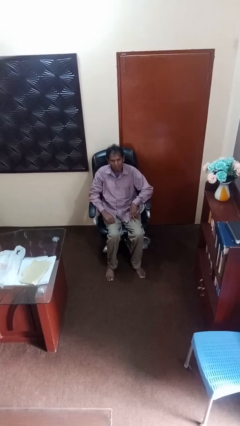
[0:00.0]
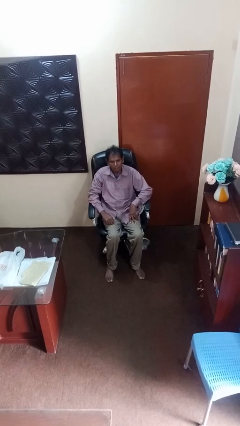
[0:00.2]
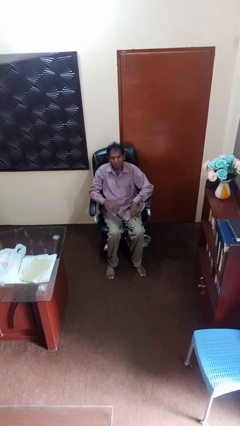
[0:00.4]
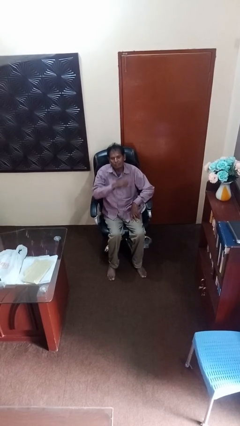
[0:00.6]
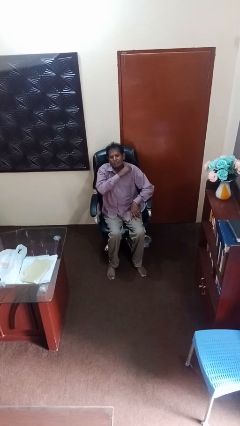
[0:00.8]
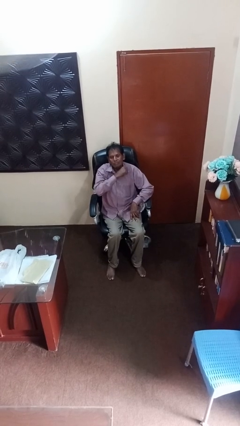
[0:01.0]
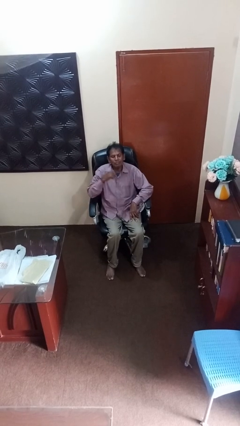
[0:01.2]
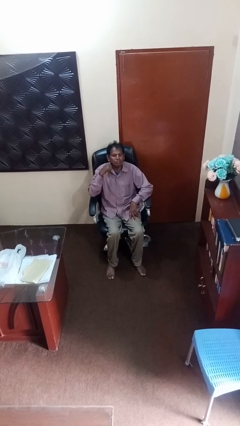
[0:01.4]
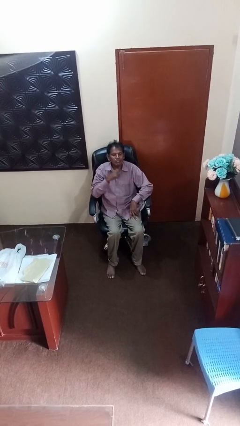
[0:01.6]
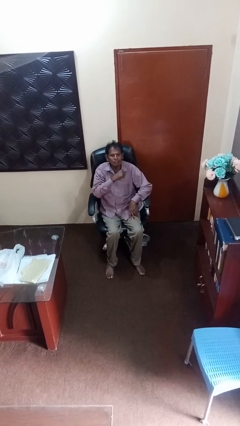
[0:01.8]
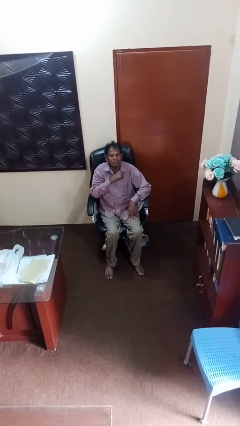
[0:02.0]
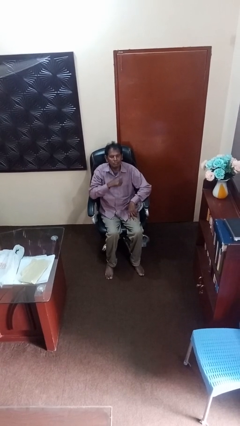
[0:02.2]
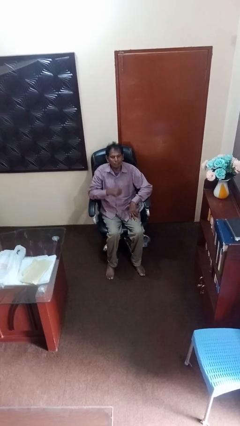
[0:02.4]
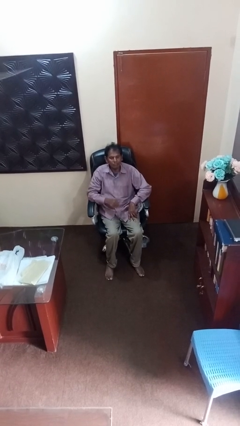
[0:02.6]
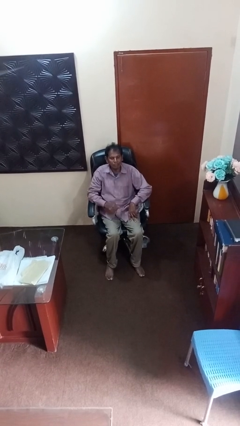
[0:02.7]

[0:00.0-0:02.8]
person gestures cut

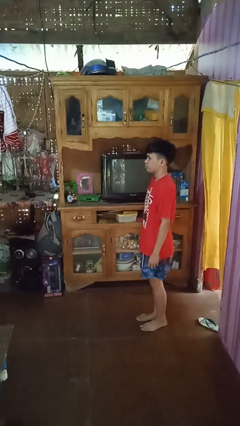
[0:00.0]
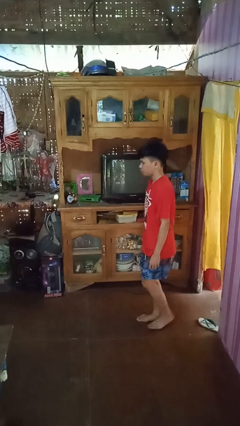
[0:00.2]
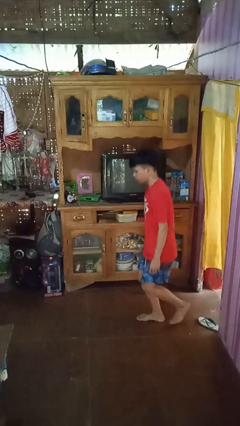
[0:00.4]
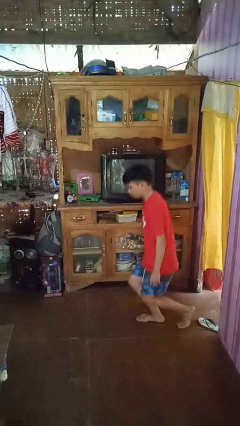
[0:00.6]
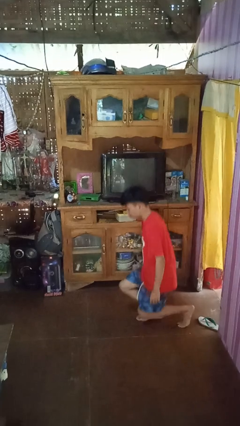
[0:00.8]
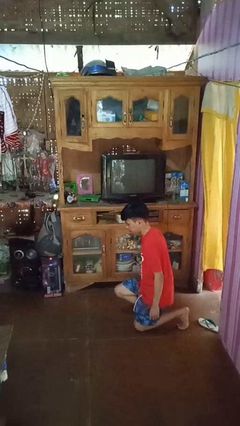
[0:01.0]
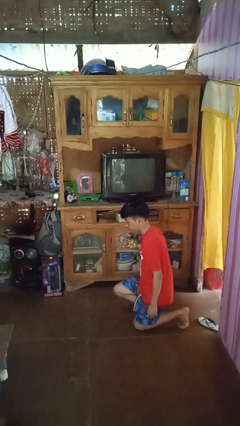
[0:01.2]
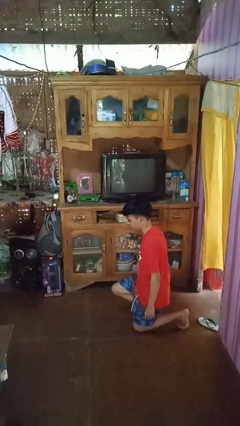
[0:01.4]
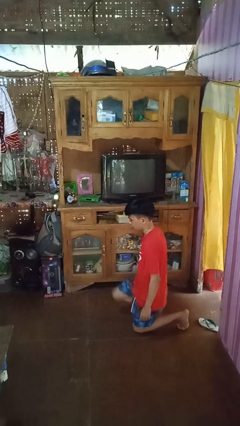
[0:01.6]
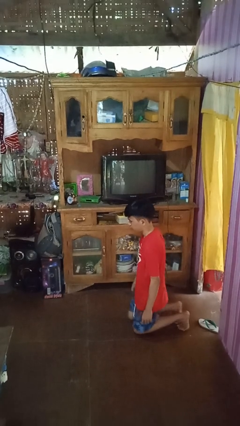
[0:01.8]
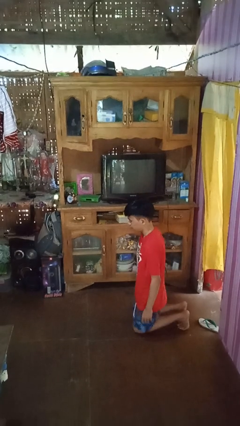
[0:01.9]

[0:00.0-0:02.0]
person kneels

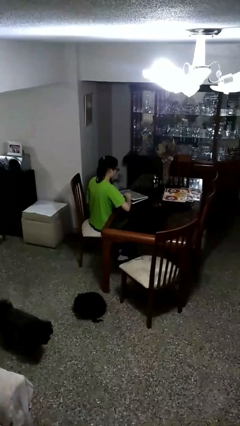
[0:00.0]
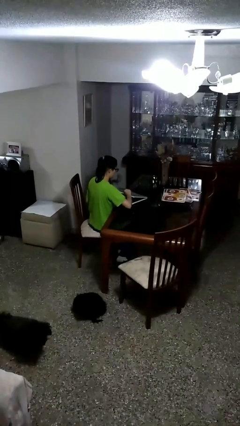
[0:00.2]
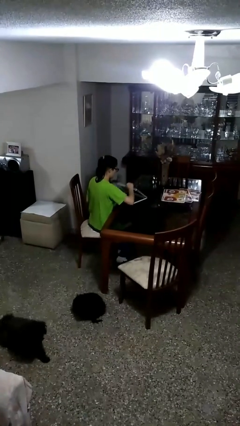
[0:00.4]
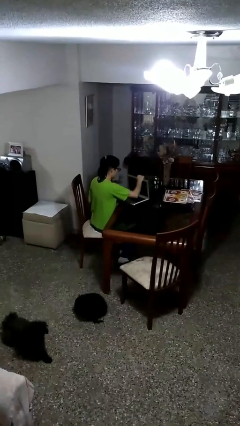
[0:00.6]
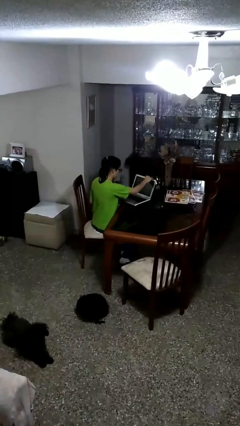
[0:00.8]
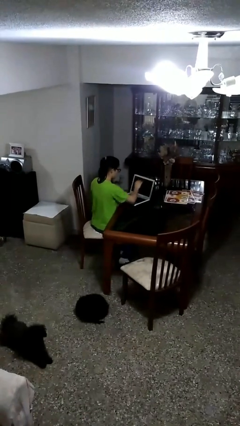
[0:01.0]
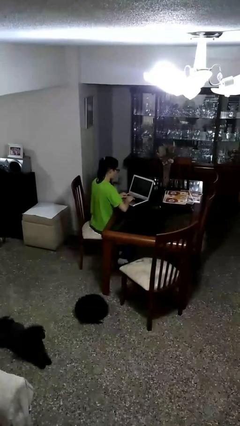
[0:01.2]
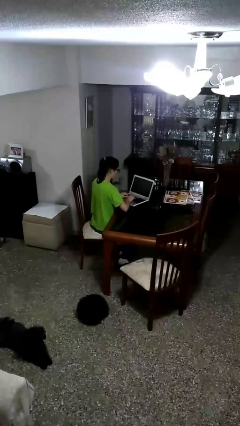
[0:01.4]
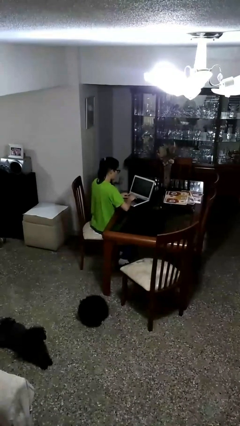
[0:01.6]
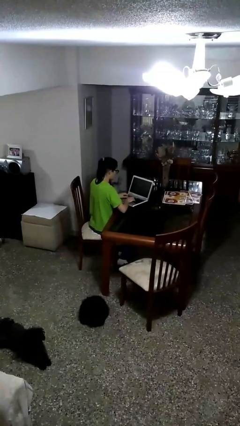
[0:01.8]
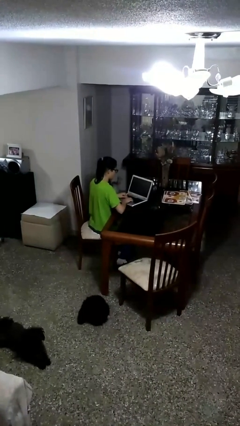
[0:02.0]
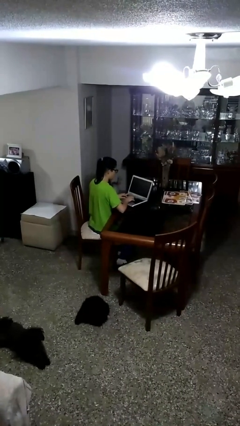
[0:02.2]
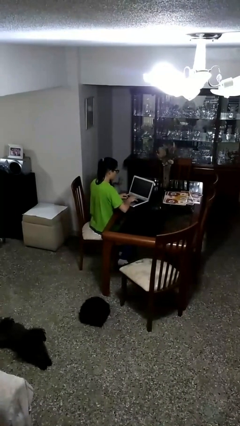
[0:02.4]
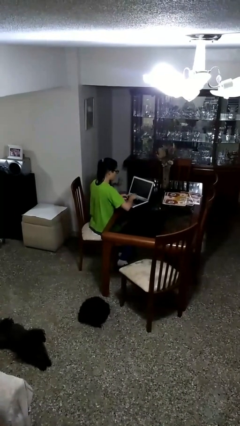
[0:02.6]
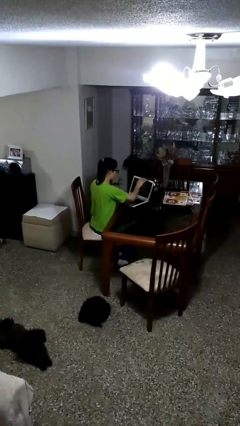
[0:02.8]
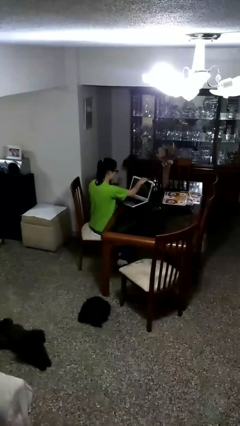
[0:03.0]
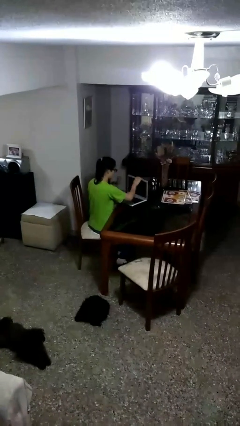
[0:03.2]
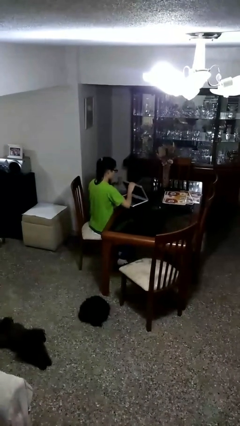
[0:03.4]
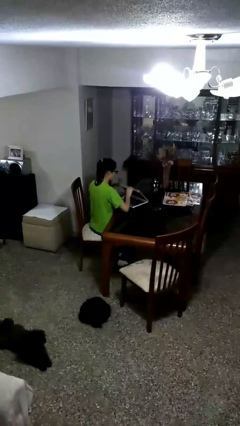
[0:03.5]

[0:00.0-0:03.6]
person interacts with laptop

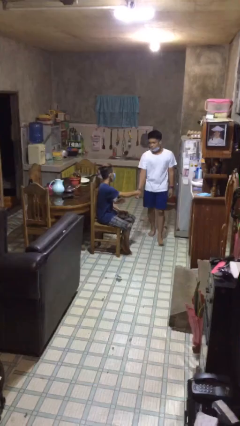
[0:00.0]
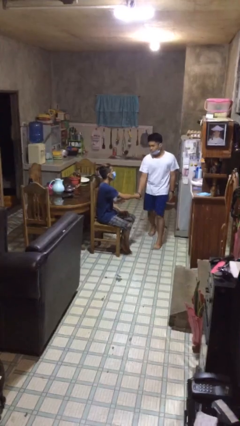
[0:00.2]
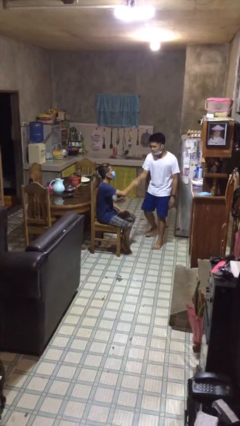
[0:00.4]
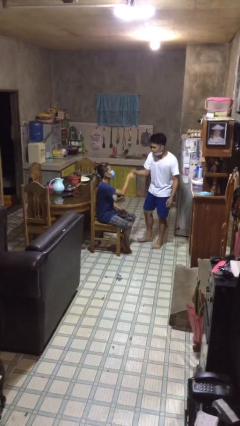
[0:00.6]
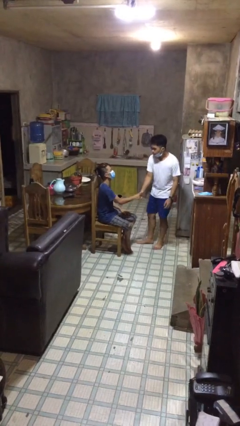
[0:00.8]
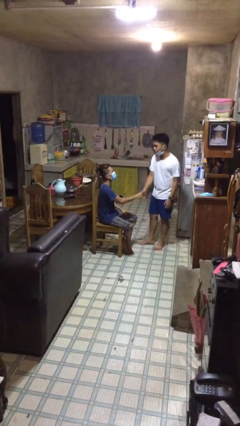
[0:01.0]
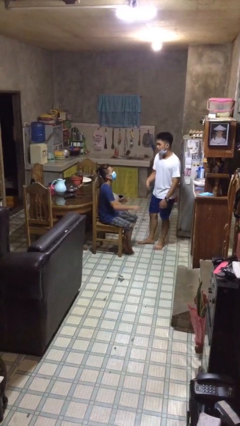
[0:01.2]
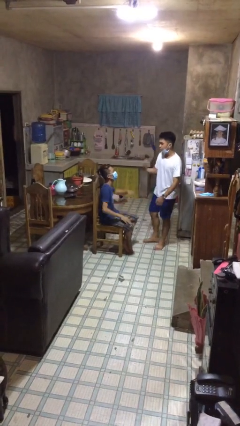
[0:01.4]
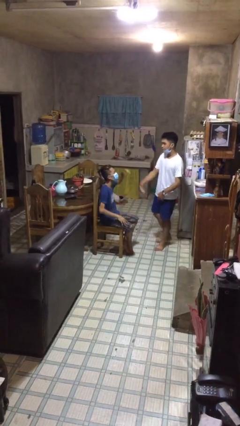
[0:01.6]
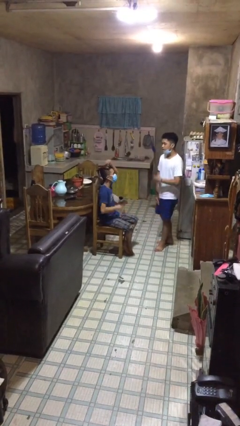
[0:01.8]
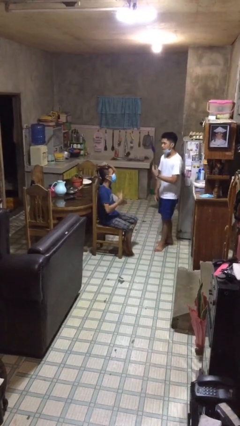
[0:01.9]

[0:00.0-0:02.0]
person shakes hand

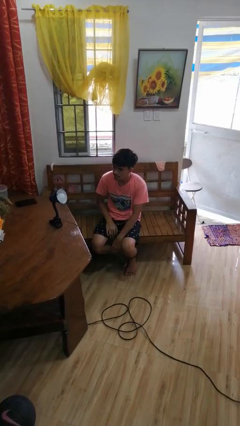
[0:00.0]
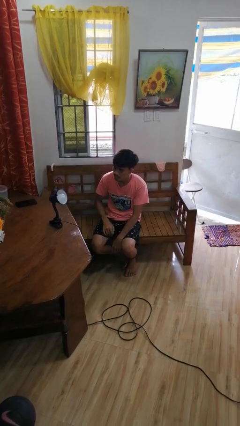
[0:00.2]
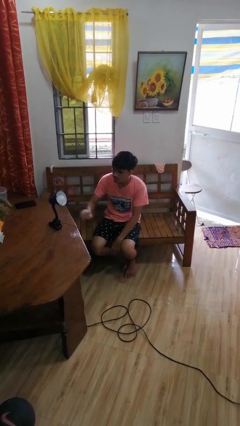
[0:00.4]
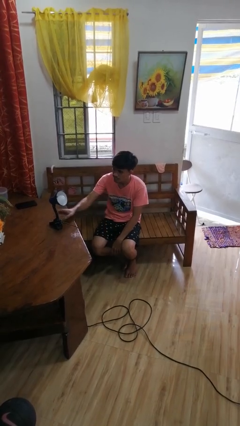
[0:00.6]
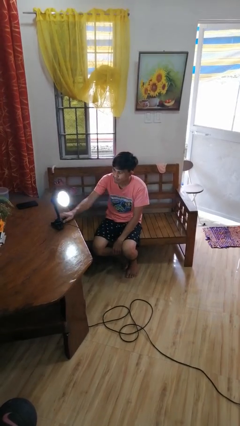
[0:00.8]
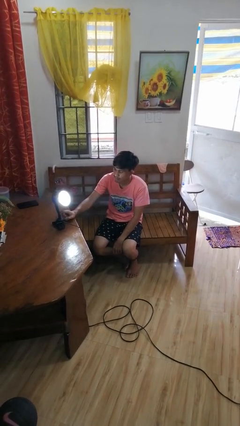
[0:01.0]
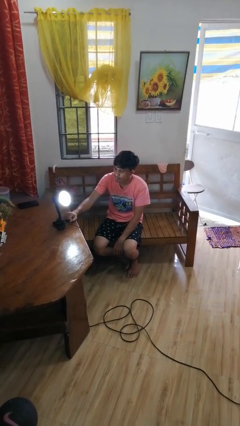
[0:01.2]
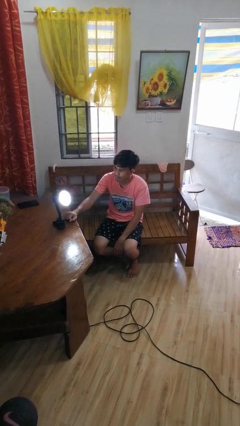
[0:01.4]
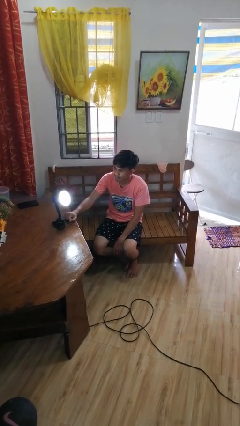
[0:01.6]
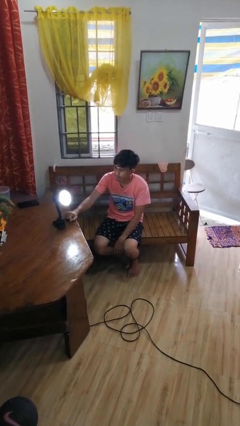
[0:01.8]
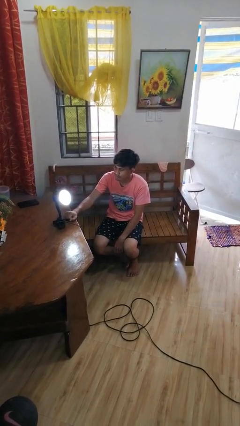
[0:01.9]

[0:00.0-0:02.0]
person turns on lamp

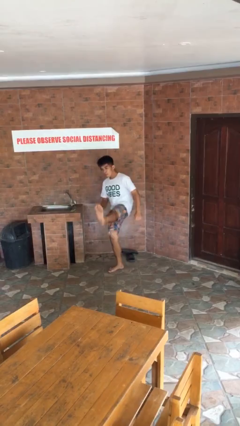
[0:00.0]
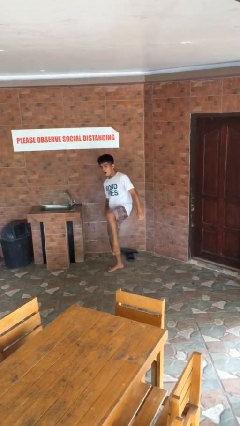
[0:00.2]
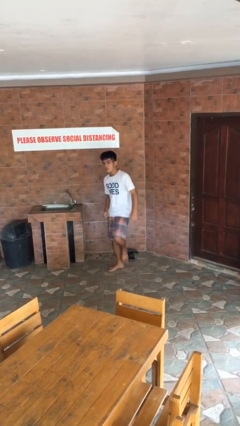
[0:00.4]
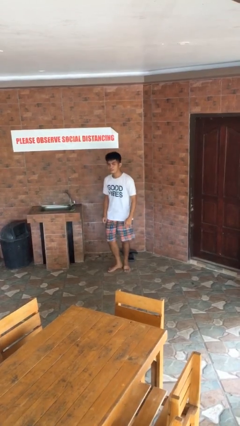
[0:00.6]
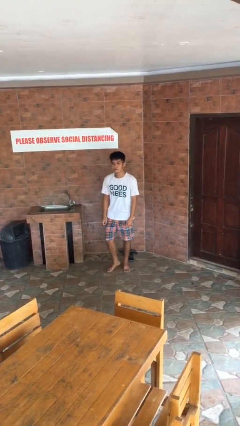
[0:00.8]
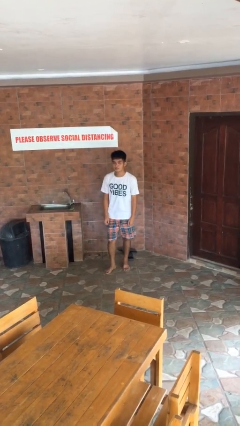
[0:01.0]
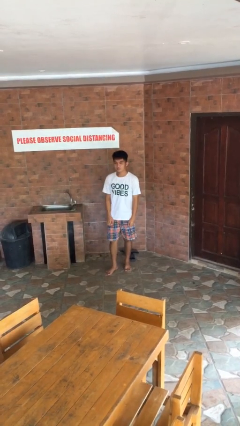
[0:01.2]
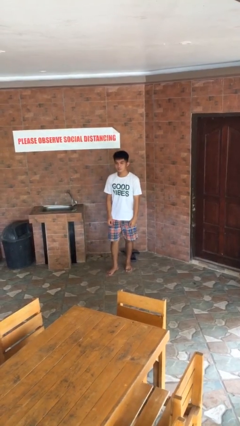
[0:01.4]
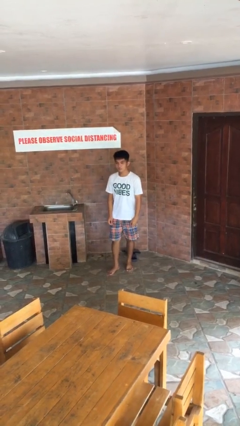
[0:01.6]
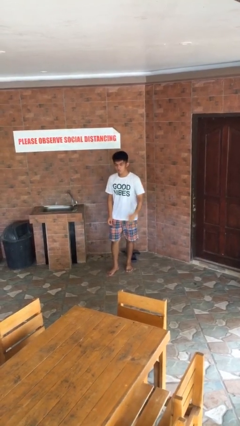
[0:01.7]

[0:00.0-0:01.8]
person karate kicks

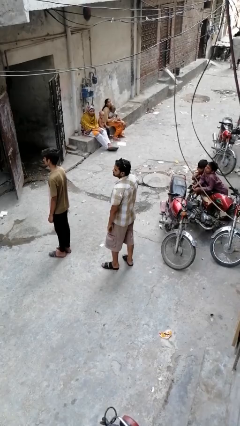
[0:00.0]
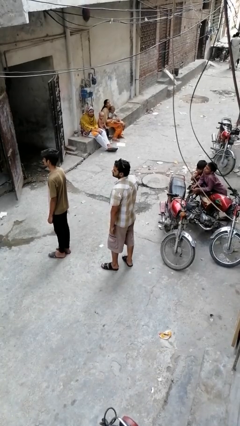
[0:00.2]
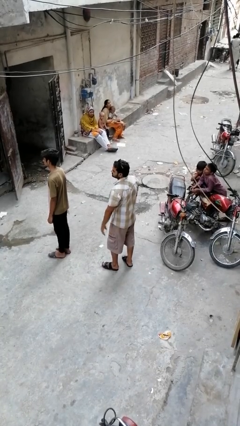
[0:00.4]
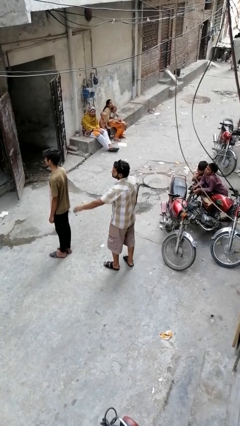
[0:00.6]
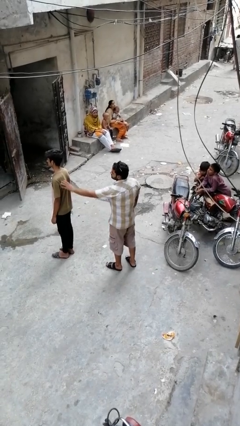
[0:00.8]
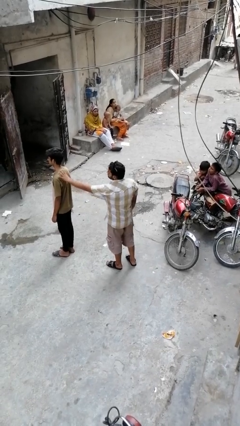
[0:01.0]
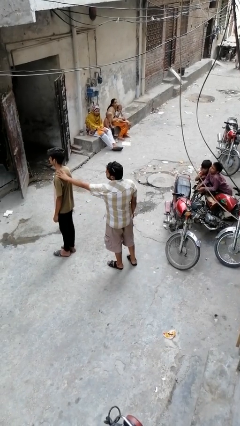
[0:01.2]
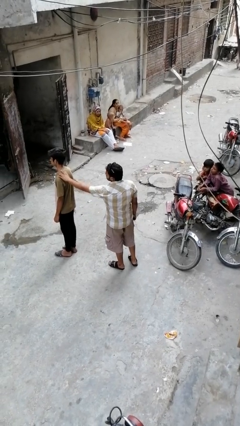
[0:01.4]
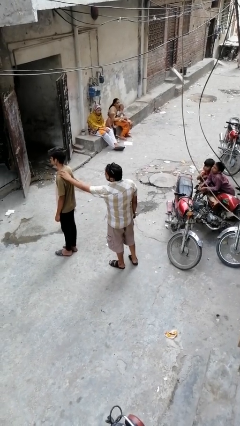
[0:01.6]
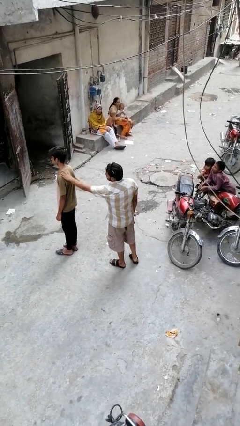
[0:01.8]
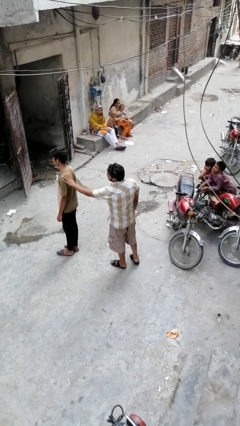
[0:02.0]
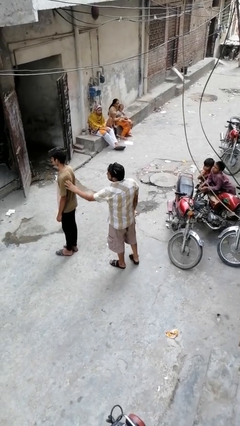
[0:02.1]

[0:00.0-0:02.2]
person touches back of person

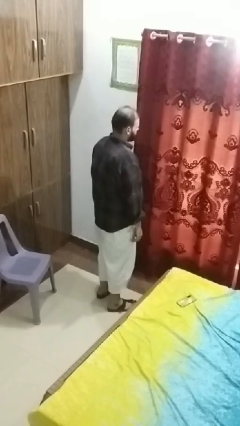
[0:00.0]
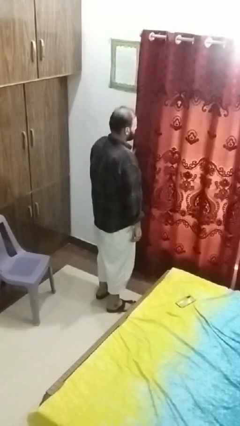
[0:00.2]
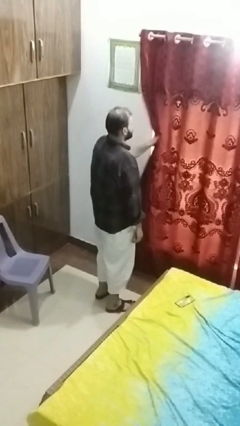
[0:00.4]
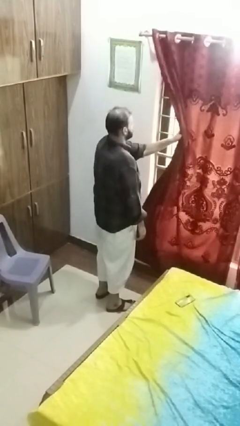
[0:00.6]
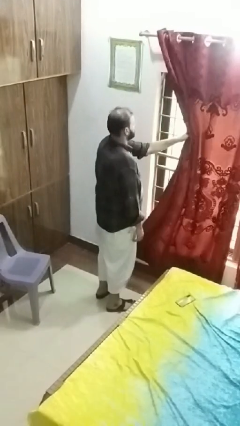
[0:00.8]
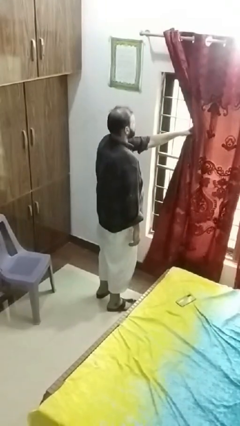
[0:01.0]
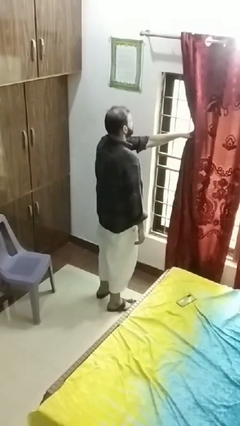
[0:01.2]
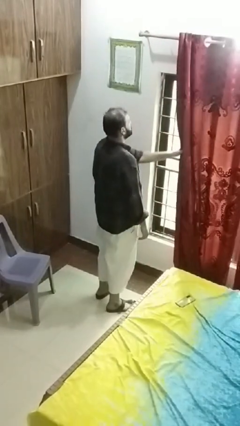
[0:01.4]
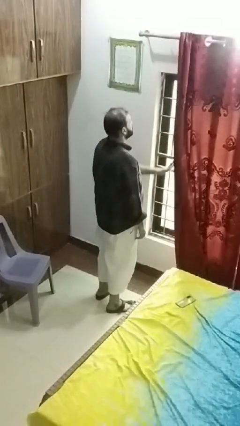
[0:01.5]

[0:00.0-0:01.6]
person opens curtains